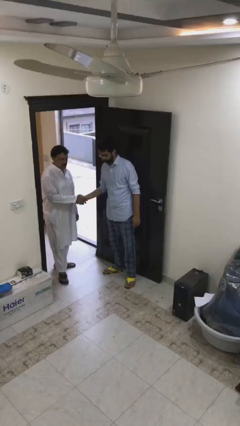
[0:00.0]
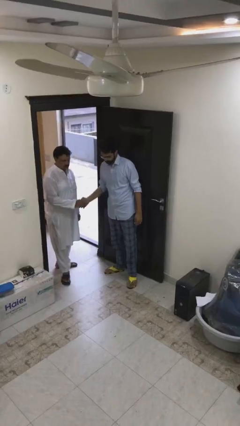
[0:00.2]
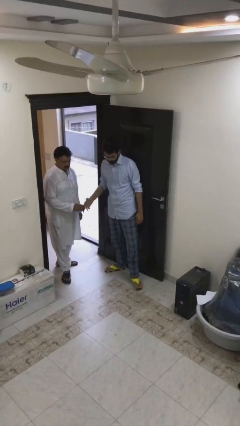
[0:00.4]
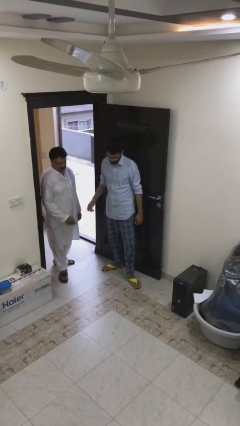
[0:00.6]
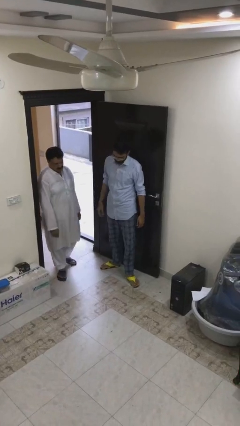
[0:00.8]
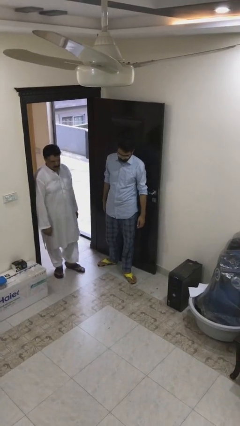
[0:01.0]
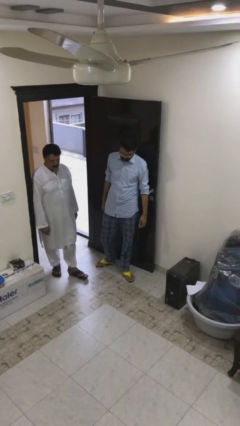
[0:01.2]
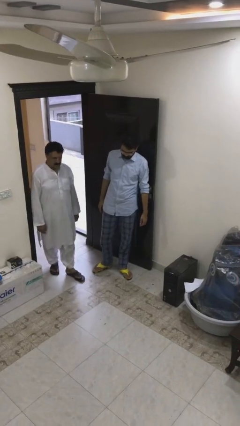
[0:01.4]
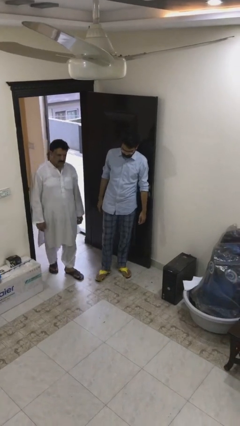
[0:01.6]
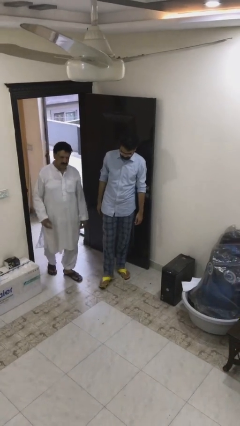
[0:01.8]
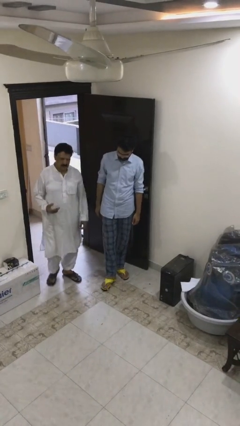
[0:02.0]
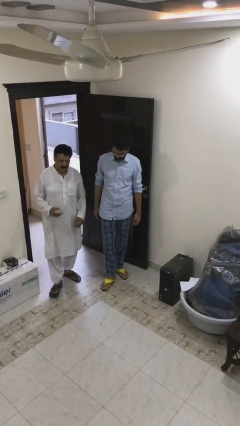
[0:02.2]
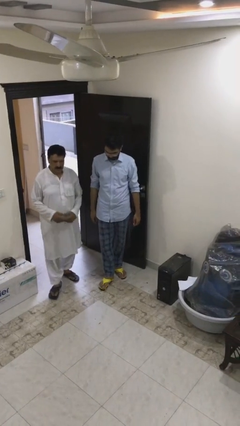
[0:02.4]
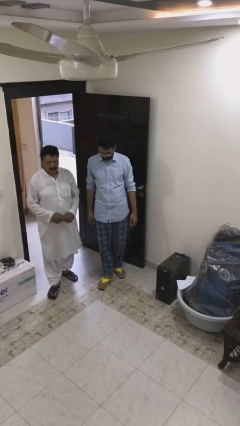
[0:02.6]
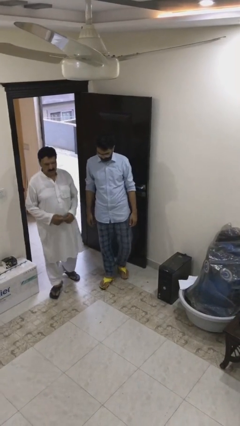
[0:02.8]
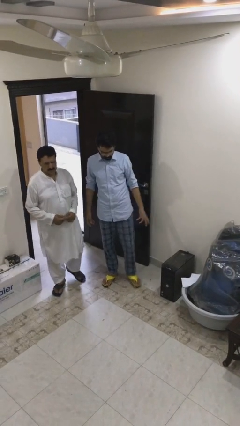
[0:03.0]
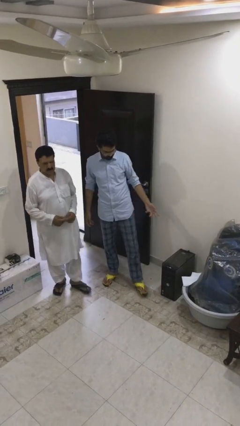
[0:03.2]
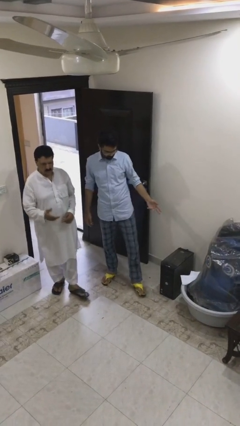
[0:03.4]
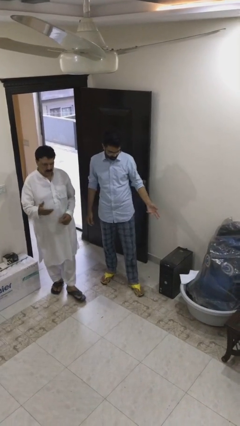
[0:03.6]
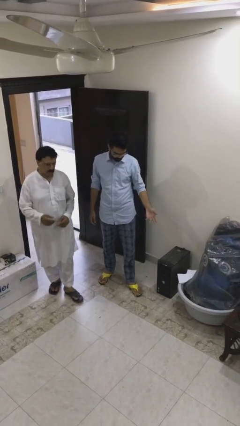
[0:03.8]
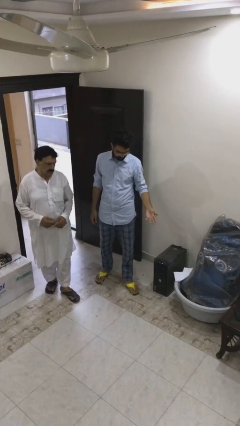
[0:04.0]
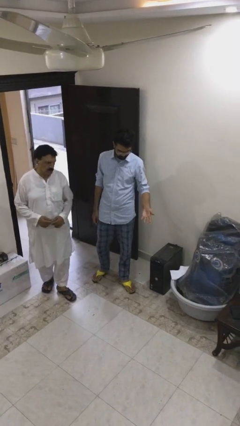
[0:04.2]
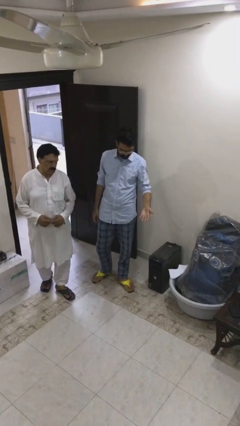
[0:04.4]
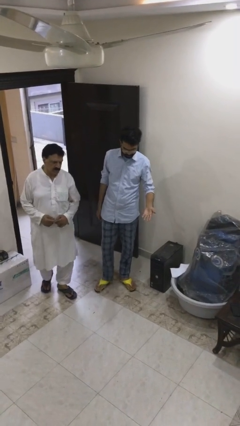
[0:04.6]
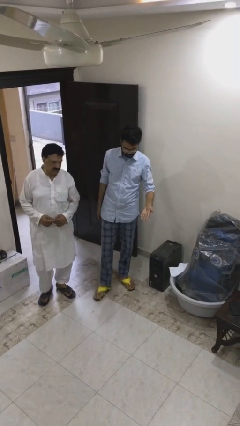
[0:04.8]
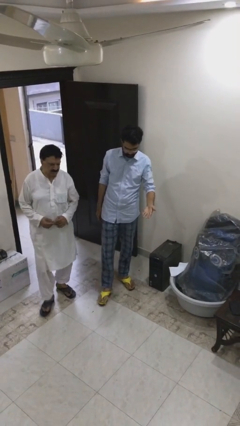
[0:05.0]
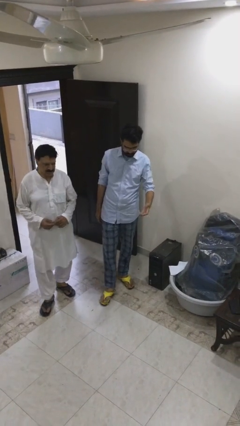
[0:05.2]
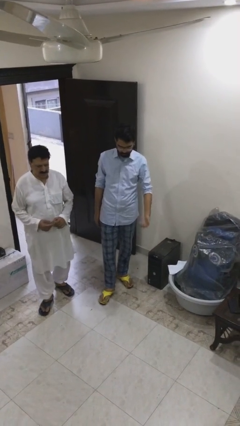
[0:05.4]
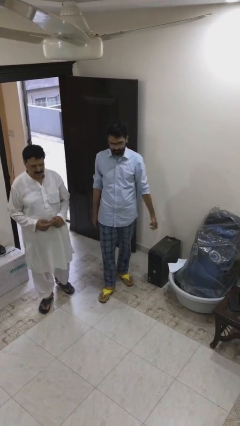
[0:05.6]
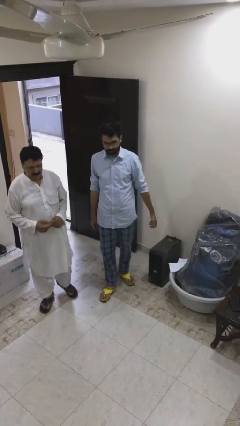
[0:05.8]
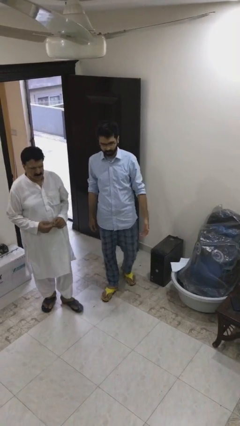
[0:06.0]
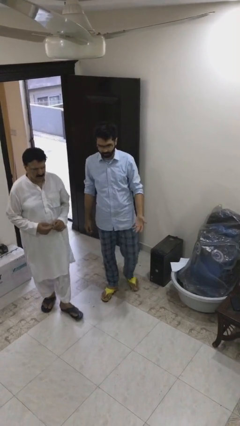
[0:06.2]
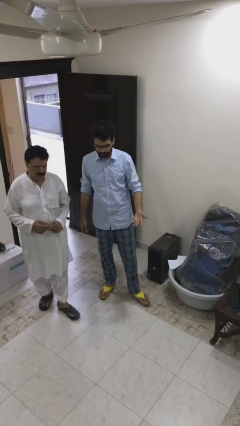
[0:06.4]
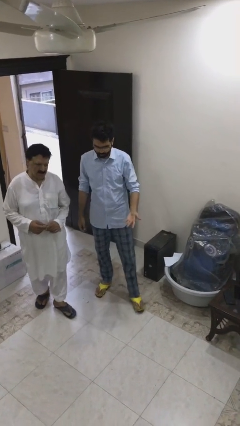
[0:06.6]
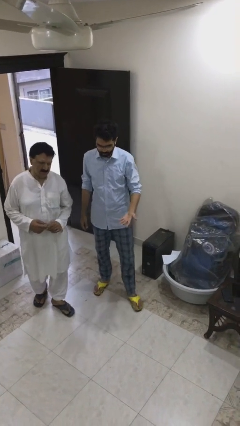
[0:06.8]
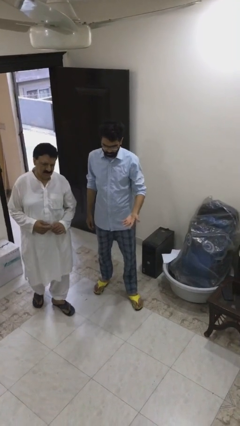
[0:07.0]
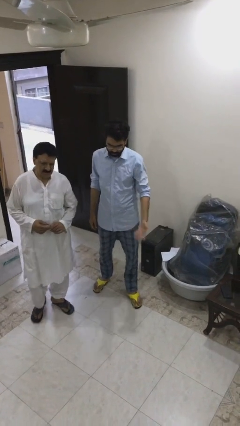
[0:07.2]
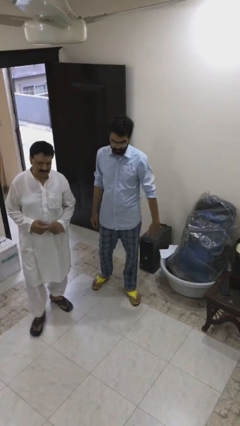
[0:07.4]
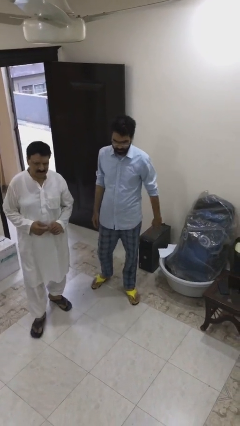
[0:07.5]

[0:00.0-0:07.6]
person talks to person

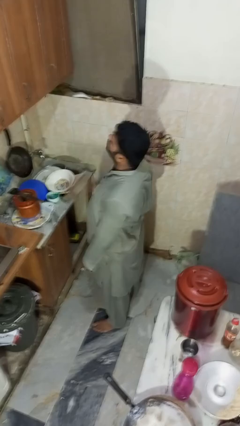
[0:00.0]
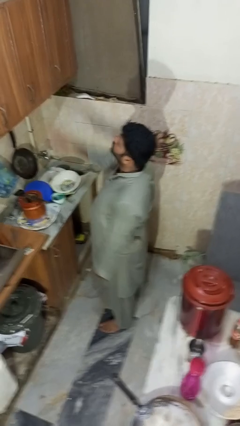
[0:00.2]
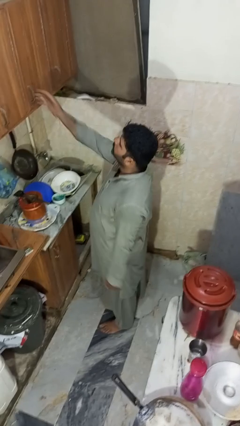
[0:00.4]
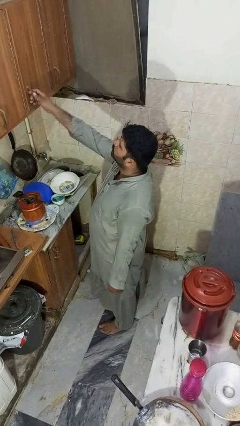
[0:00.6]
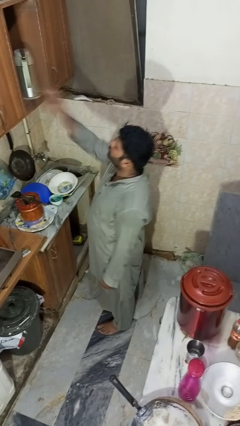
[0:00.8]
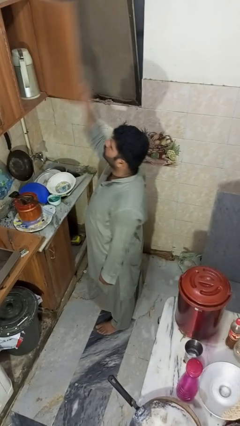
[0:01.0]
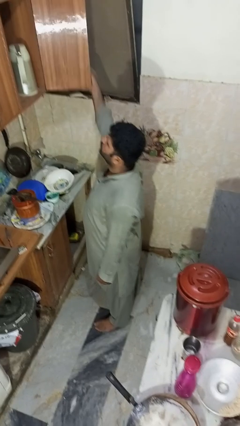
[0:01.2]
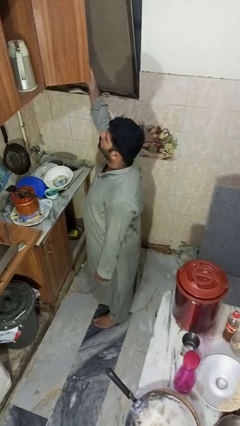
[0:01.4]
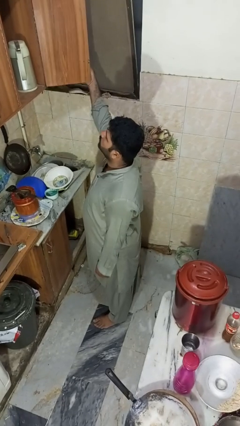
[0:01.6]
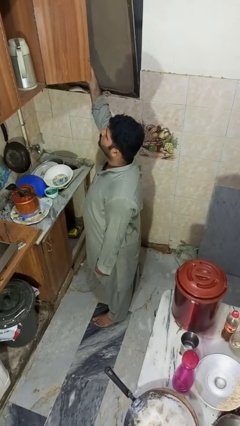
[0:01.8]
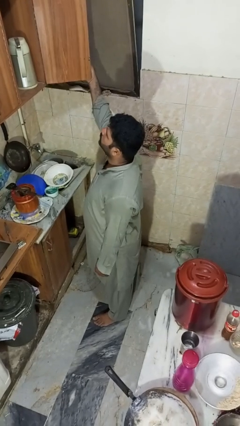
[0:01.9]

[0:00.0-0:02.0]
person opens cabinet

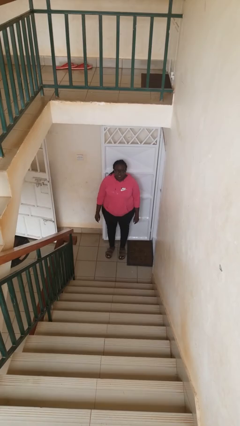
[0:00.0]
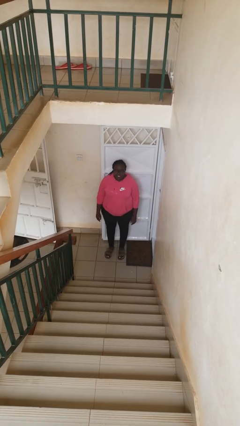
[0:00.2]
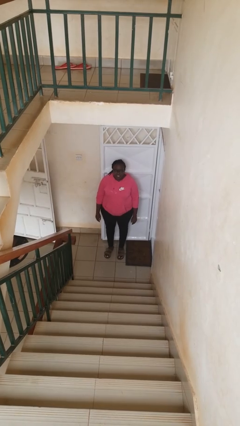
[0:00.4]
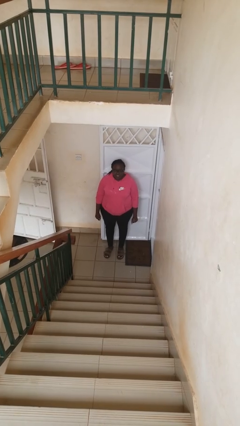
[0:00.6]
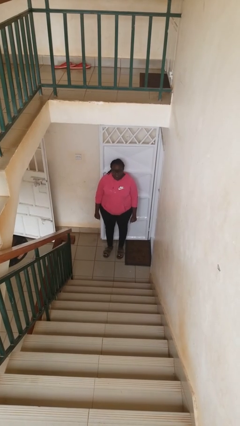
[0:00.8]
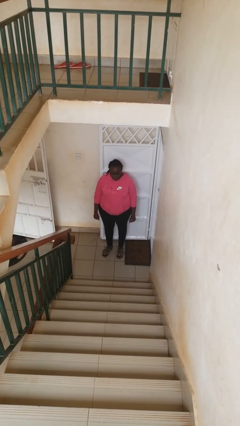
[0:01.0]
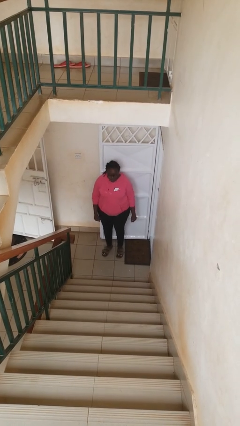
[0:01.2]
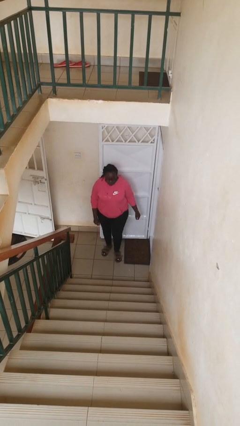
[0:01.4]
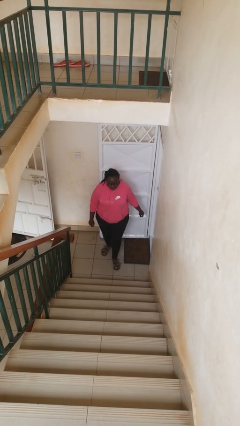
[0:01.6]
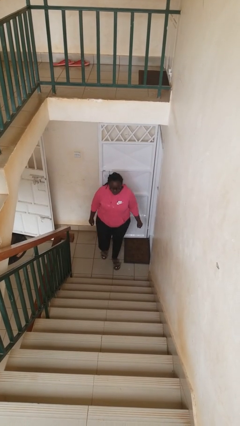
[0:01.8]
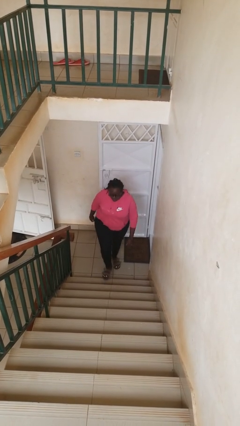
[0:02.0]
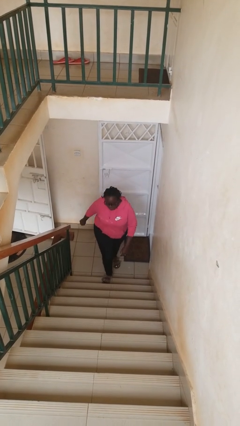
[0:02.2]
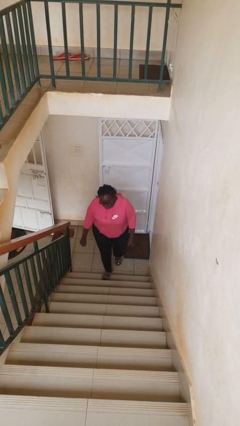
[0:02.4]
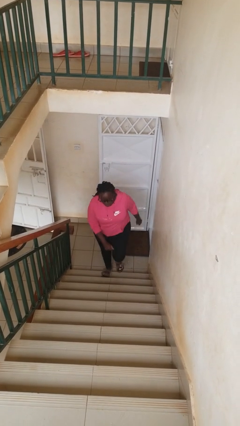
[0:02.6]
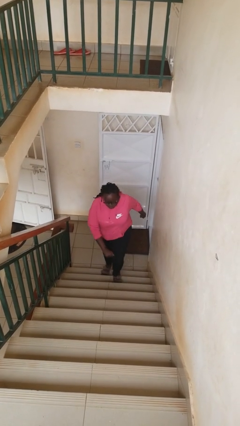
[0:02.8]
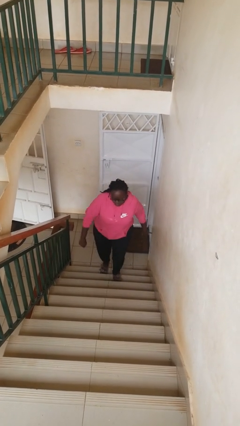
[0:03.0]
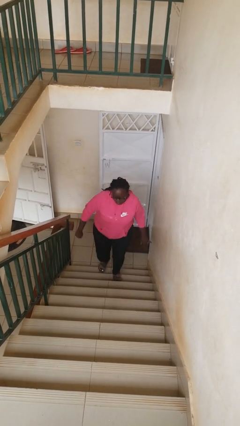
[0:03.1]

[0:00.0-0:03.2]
person climbs up stairs

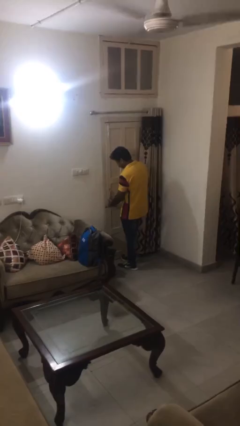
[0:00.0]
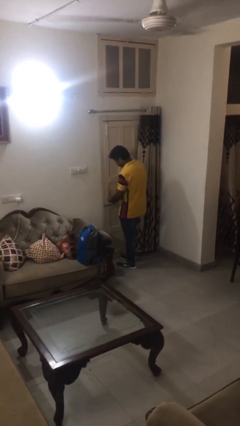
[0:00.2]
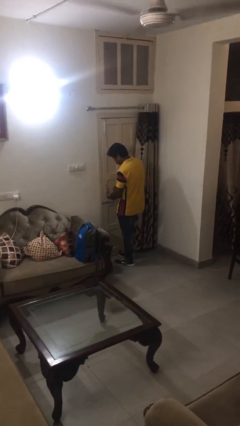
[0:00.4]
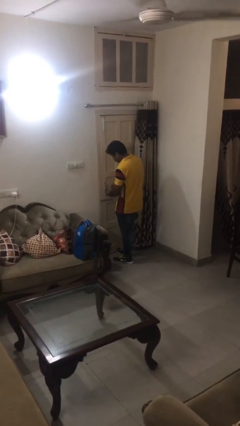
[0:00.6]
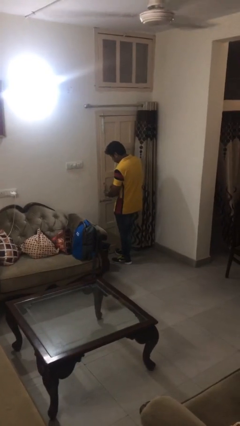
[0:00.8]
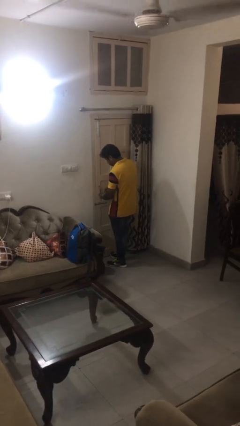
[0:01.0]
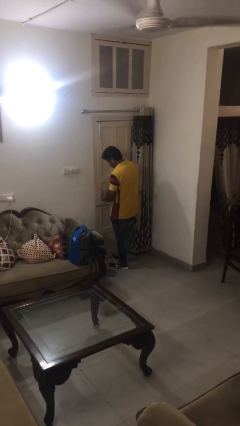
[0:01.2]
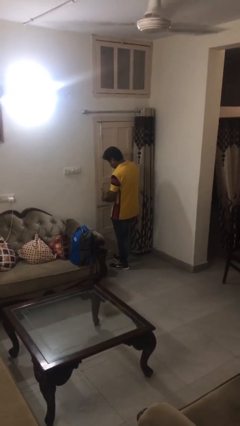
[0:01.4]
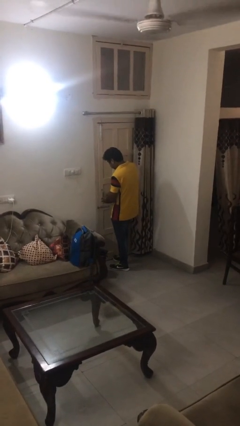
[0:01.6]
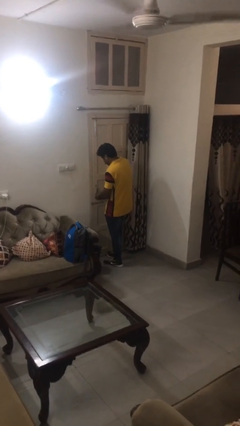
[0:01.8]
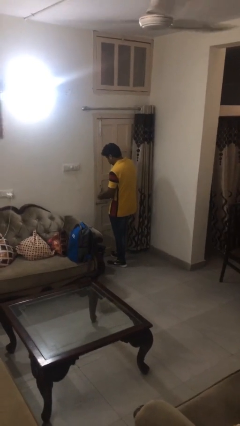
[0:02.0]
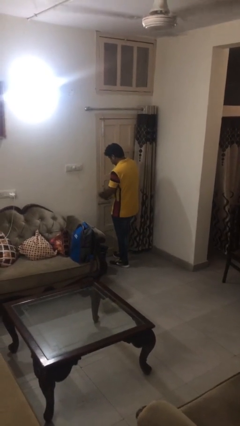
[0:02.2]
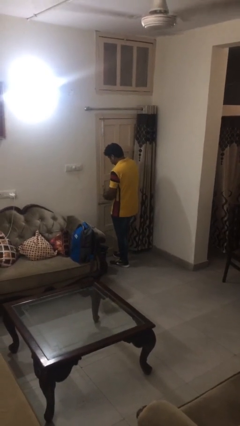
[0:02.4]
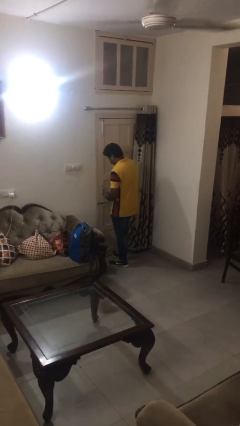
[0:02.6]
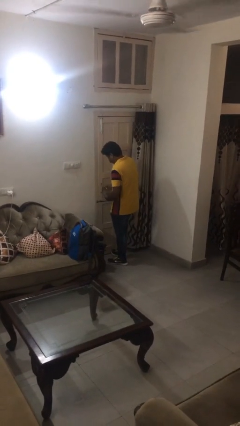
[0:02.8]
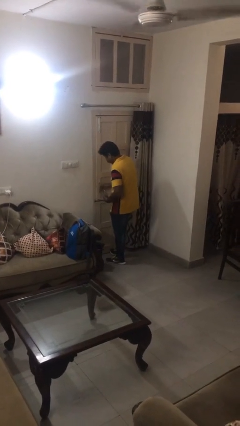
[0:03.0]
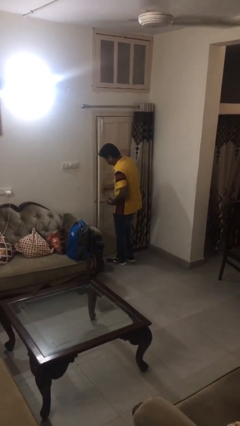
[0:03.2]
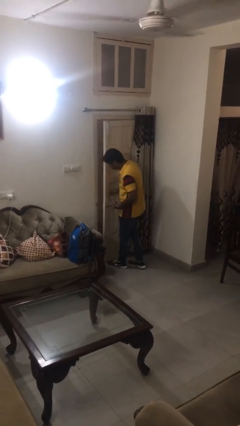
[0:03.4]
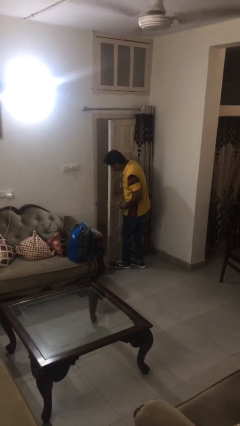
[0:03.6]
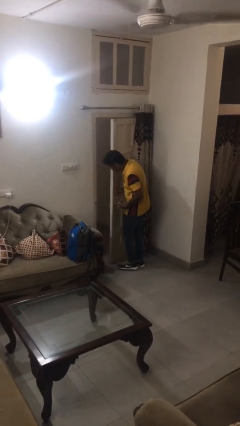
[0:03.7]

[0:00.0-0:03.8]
person unlocks door with keys

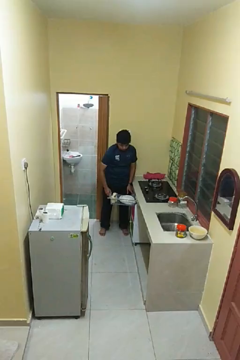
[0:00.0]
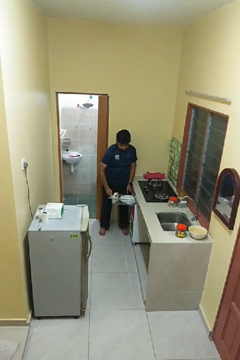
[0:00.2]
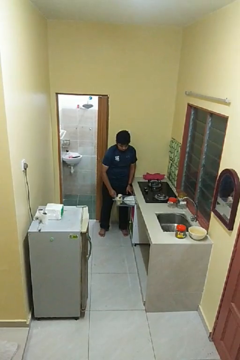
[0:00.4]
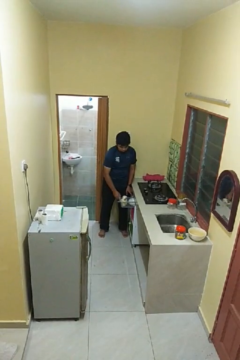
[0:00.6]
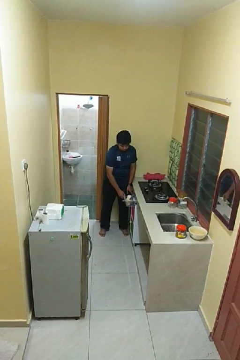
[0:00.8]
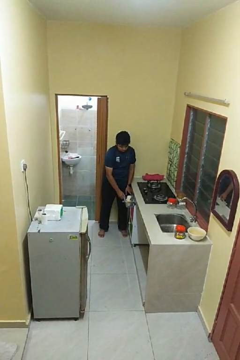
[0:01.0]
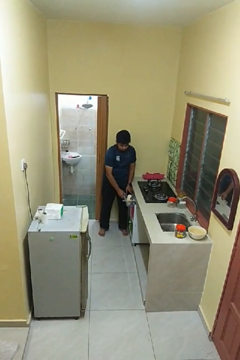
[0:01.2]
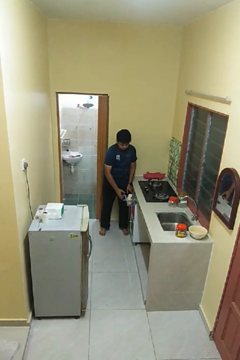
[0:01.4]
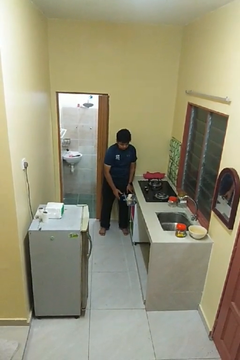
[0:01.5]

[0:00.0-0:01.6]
person closes kitchen drawer
